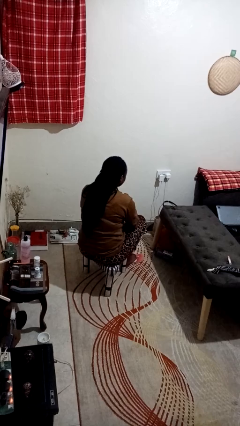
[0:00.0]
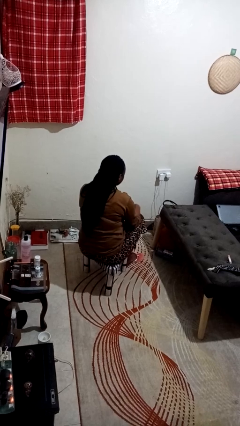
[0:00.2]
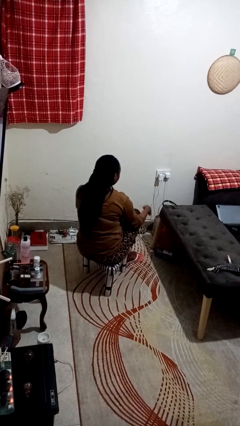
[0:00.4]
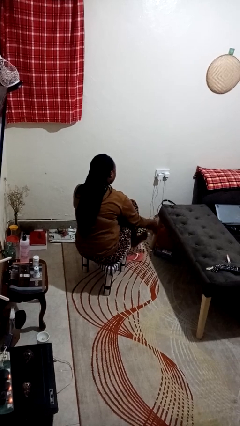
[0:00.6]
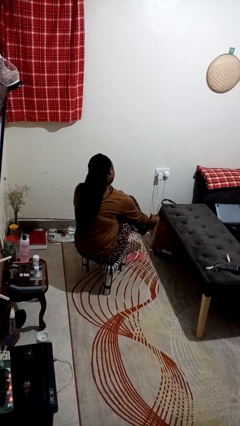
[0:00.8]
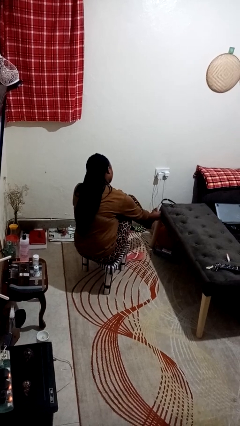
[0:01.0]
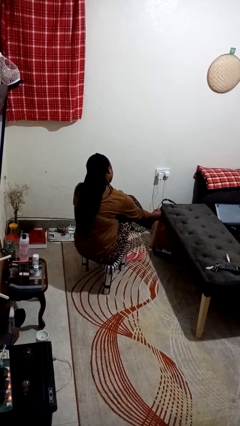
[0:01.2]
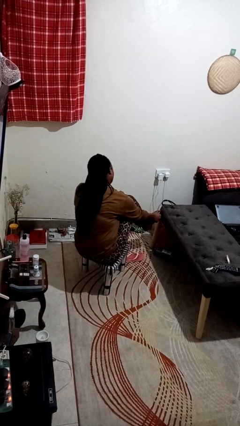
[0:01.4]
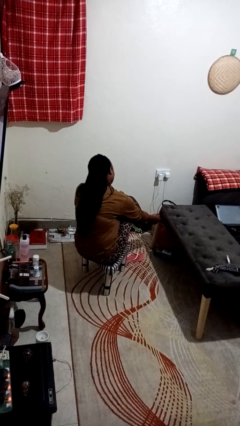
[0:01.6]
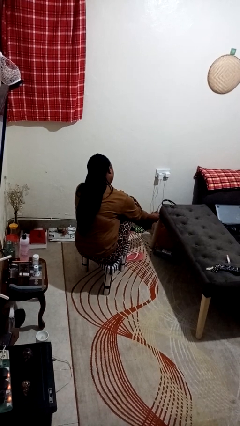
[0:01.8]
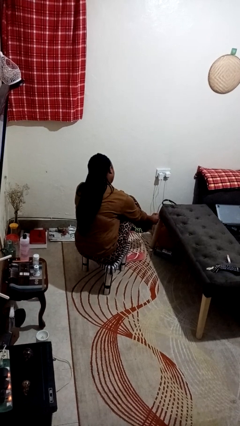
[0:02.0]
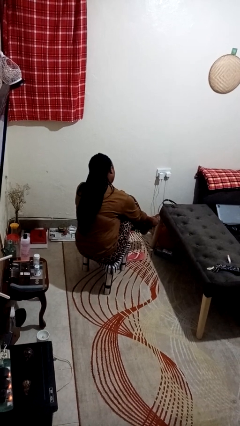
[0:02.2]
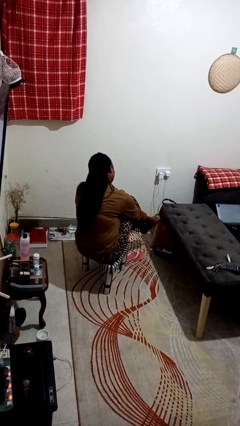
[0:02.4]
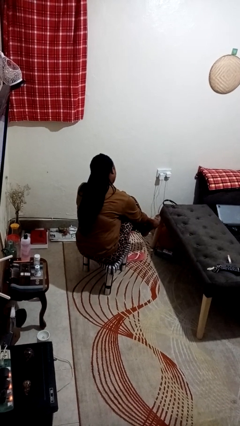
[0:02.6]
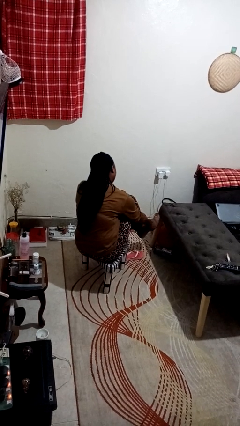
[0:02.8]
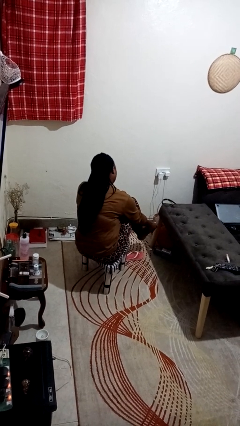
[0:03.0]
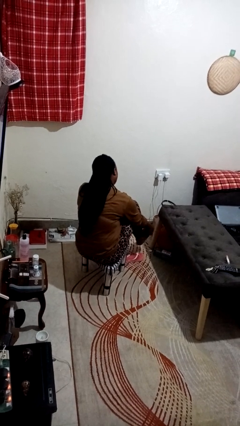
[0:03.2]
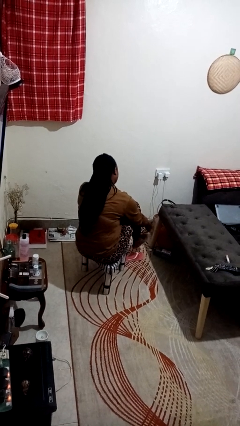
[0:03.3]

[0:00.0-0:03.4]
person rubs foot

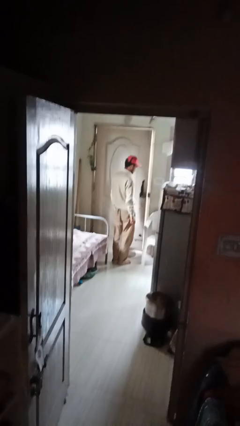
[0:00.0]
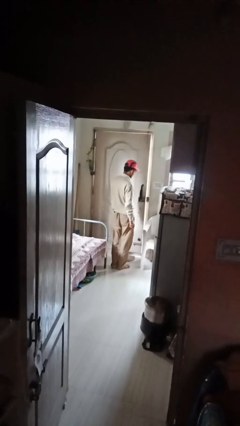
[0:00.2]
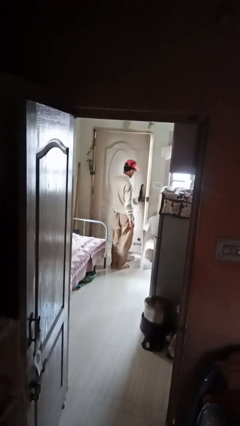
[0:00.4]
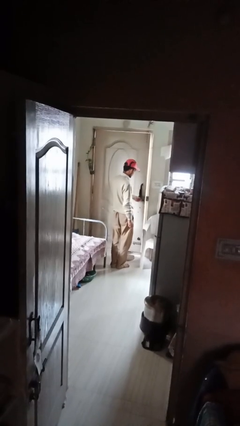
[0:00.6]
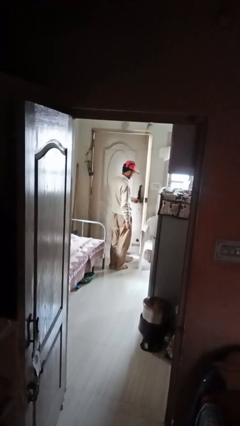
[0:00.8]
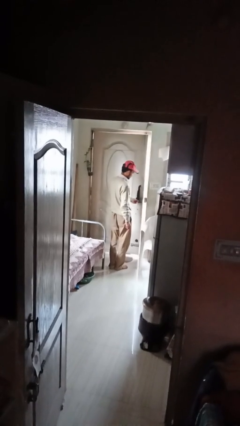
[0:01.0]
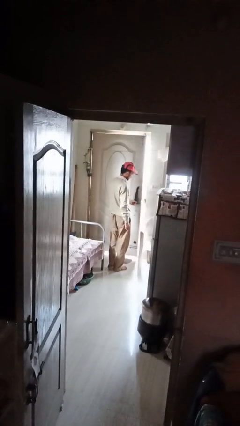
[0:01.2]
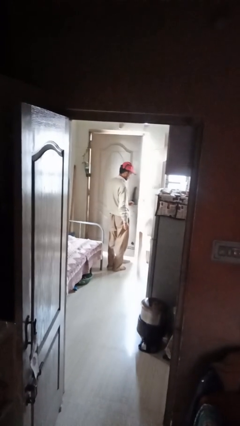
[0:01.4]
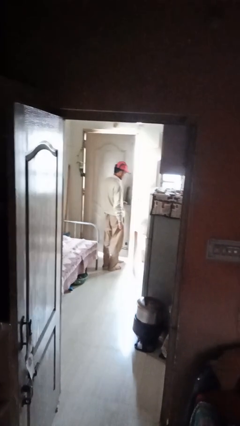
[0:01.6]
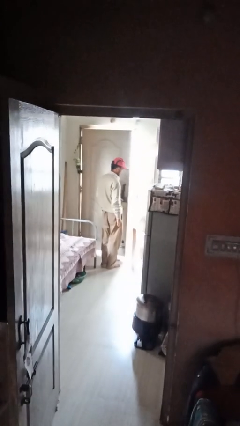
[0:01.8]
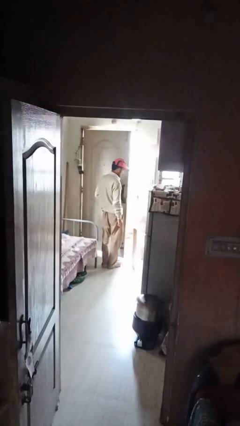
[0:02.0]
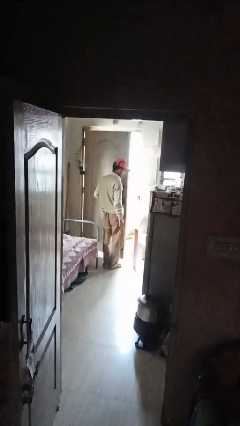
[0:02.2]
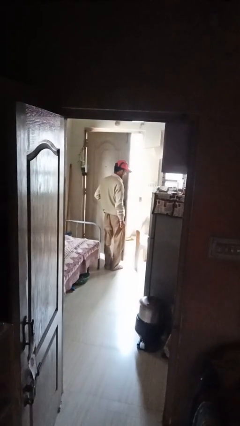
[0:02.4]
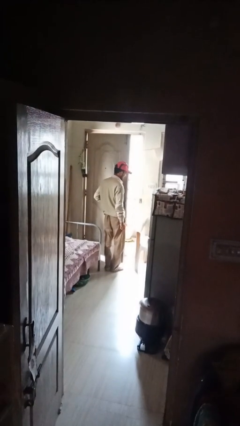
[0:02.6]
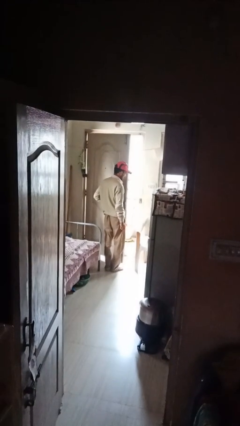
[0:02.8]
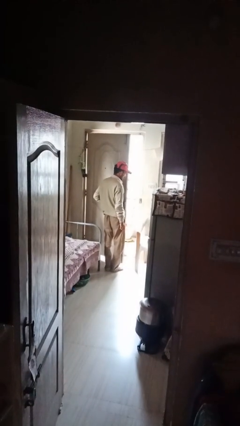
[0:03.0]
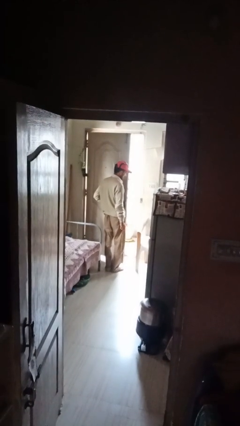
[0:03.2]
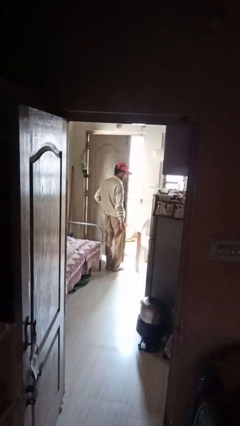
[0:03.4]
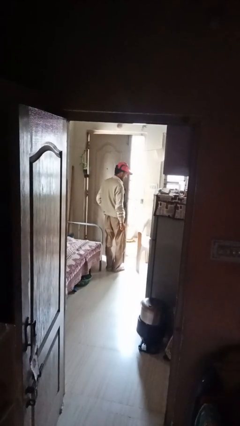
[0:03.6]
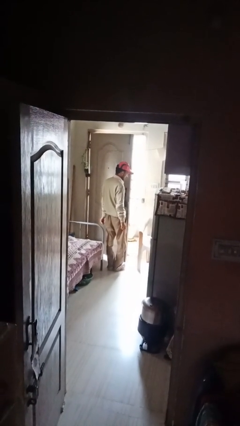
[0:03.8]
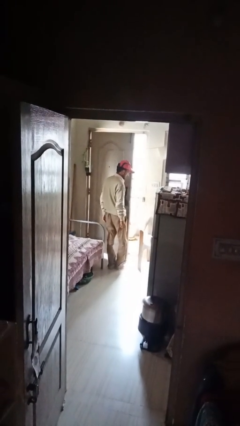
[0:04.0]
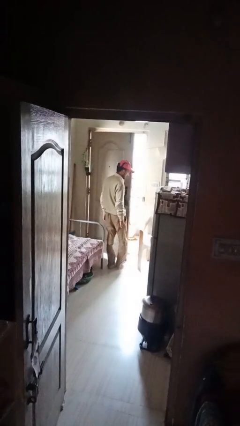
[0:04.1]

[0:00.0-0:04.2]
person opens facility door

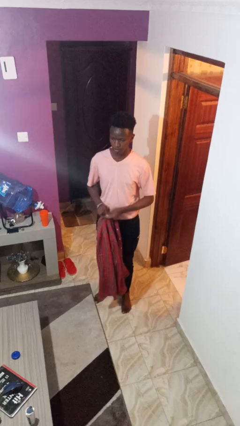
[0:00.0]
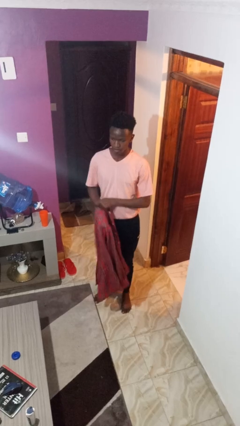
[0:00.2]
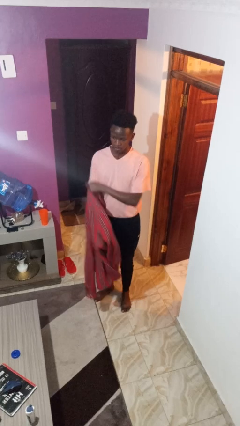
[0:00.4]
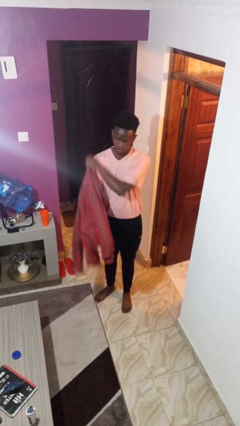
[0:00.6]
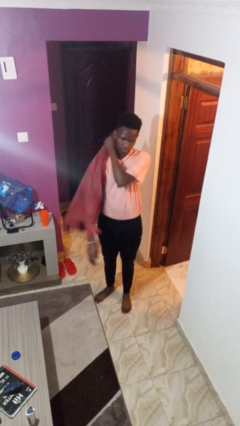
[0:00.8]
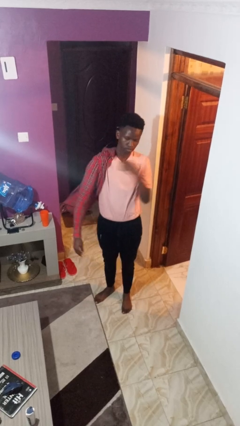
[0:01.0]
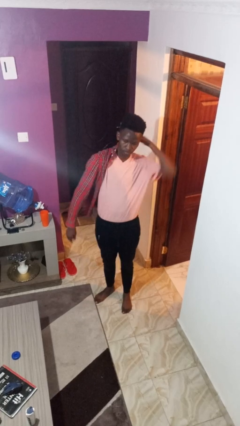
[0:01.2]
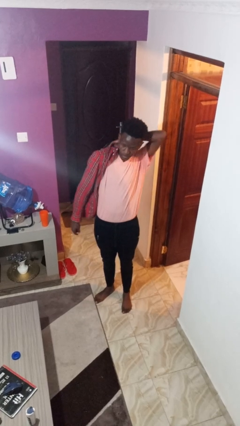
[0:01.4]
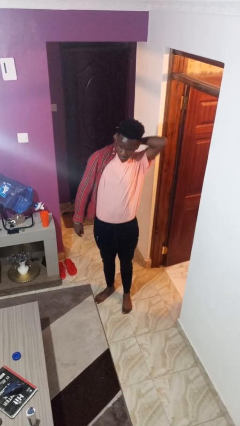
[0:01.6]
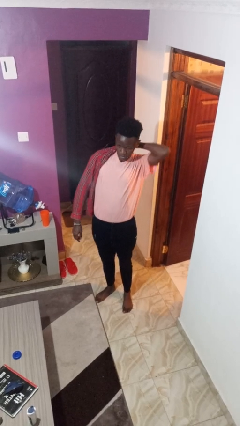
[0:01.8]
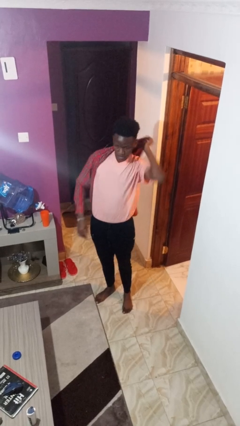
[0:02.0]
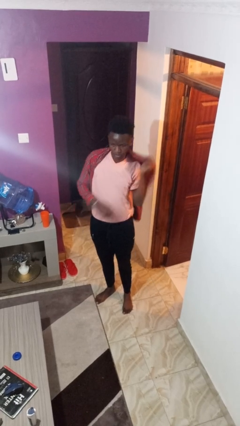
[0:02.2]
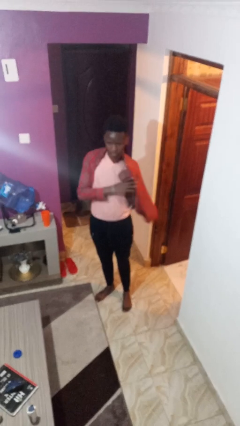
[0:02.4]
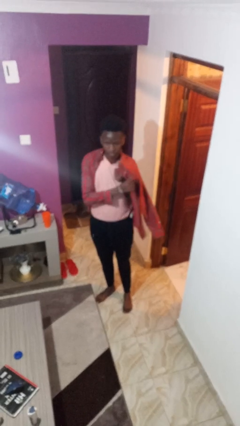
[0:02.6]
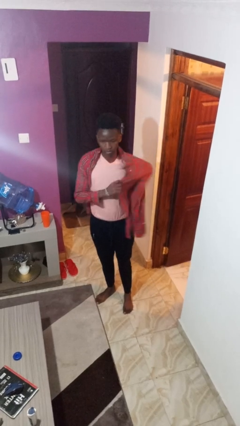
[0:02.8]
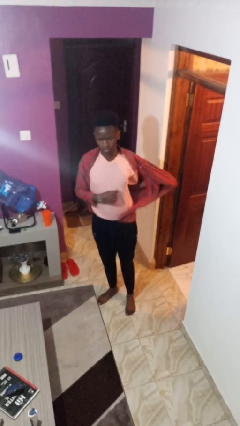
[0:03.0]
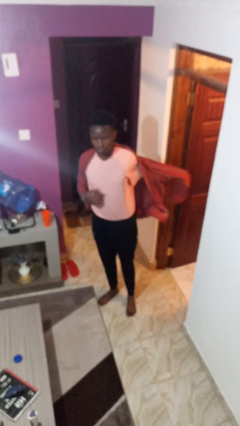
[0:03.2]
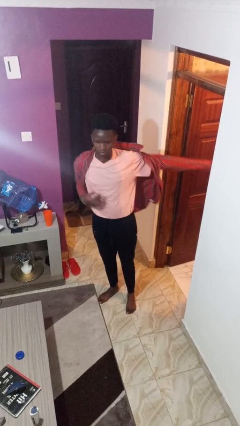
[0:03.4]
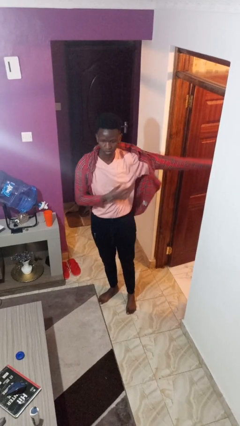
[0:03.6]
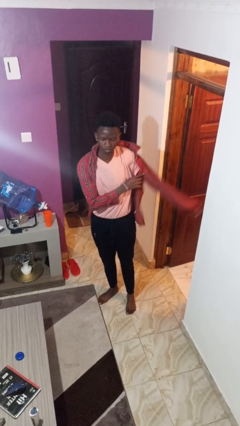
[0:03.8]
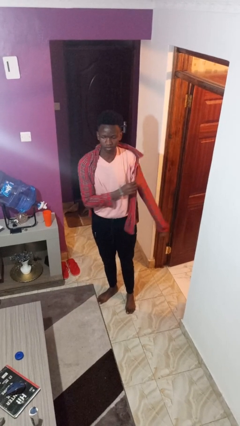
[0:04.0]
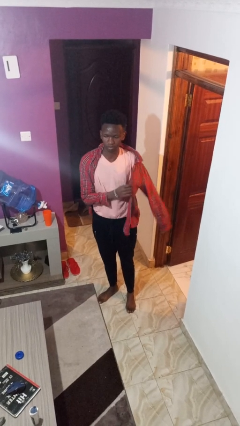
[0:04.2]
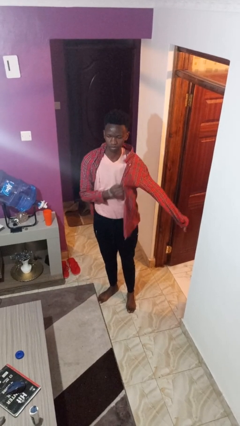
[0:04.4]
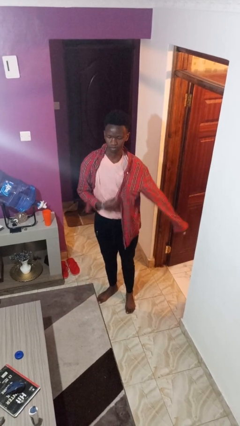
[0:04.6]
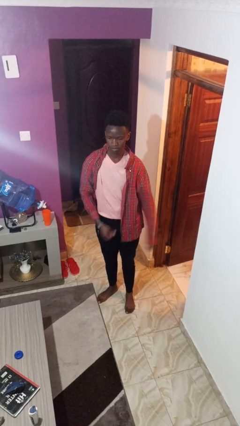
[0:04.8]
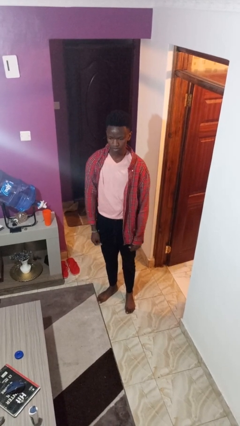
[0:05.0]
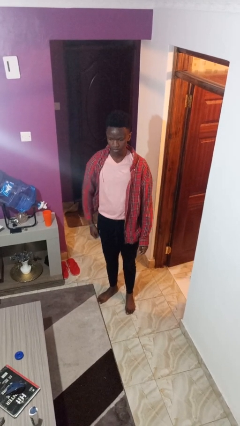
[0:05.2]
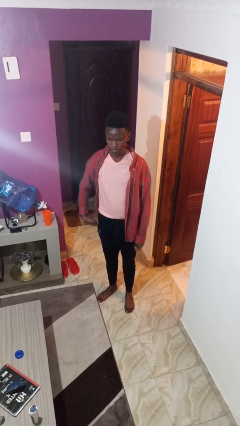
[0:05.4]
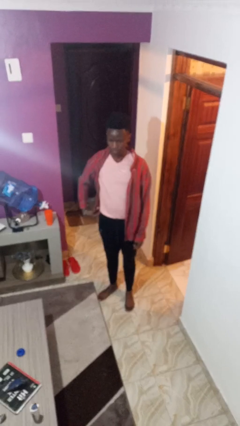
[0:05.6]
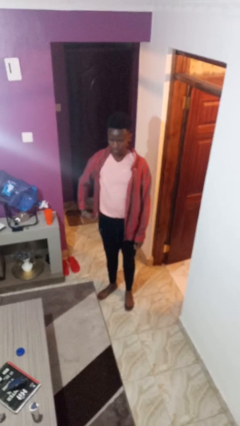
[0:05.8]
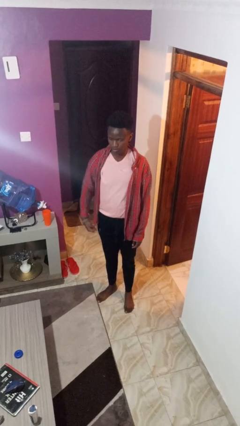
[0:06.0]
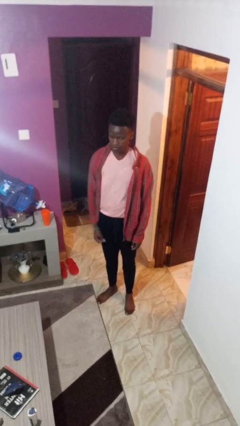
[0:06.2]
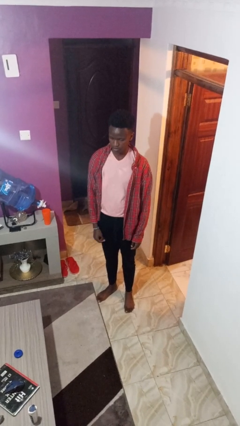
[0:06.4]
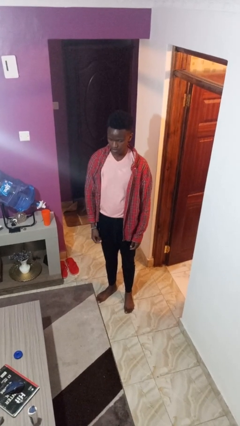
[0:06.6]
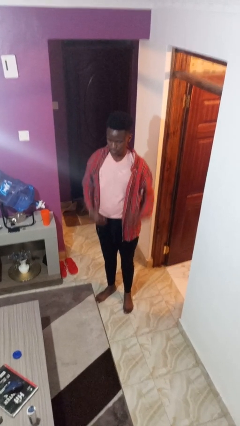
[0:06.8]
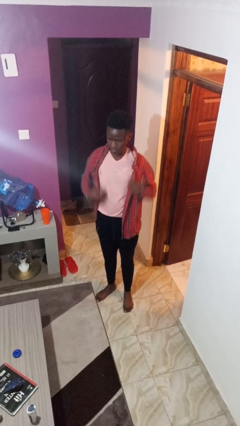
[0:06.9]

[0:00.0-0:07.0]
person puts on shirt

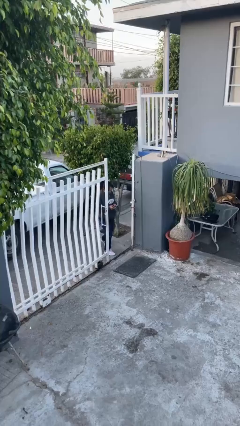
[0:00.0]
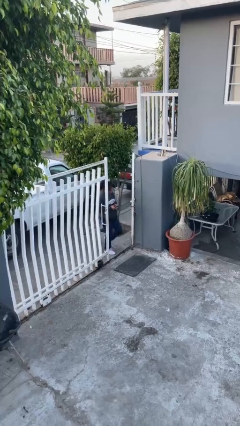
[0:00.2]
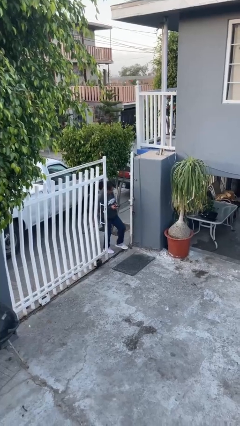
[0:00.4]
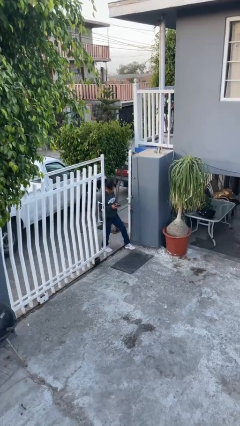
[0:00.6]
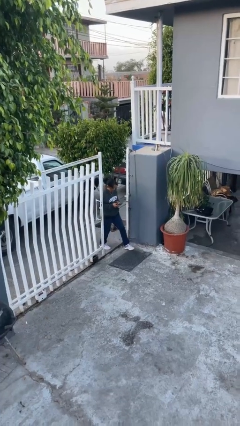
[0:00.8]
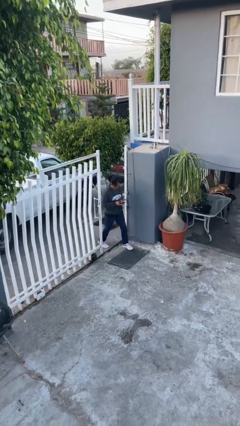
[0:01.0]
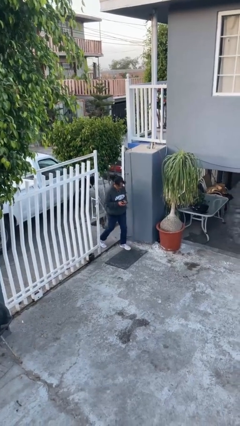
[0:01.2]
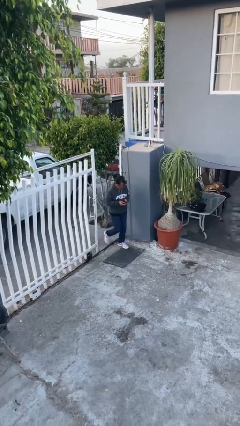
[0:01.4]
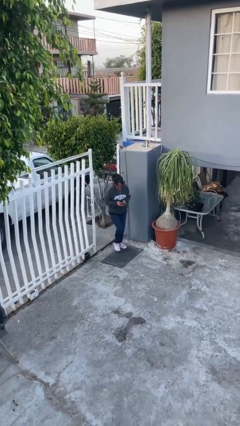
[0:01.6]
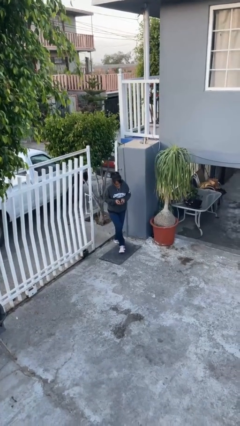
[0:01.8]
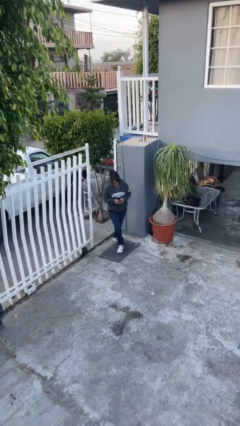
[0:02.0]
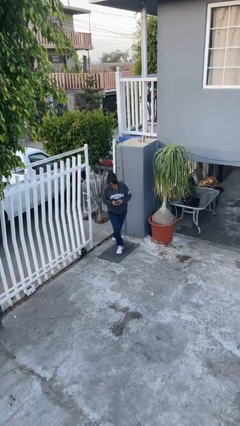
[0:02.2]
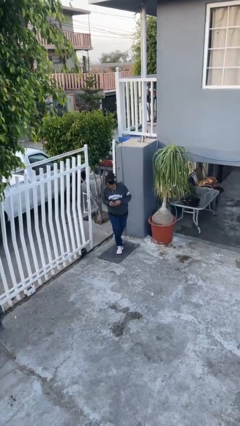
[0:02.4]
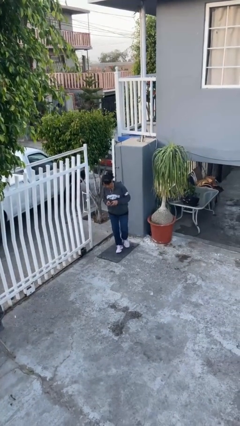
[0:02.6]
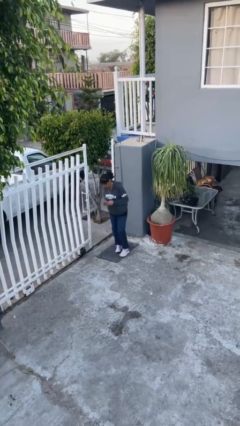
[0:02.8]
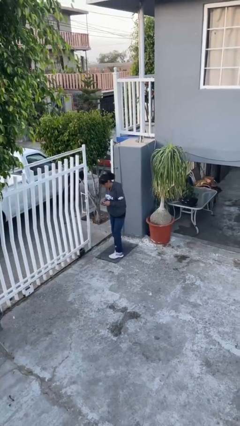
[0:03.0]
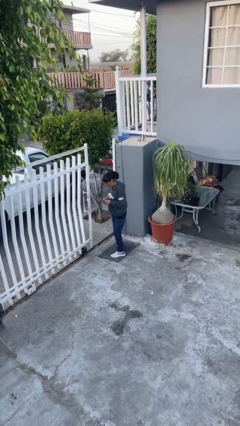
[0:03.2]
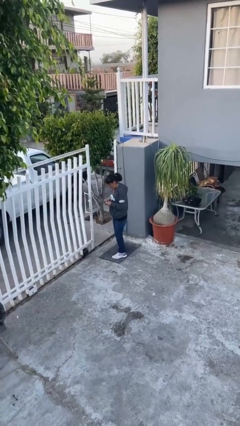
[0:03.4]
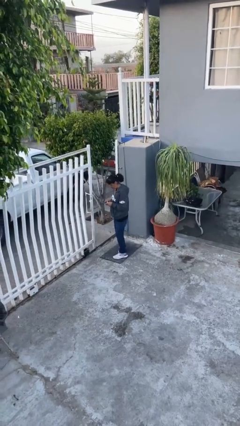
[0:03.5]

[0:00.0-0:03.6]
person enters scene through structure
